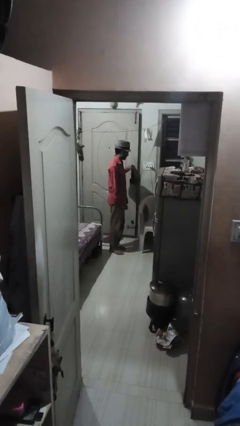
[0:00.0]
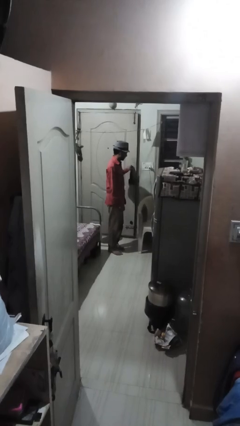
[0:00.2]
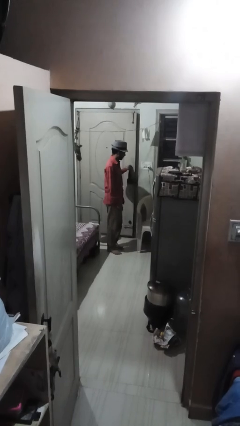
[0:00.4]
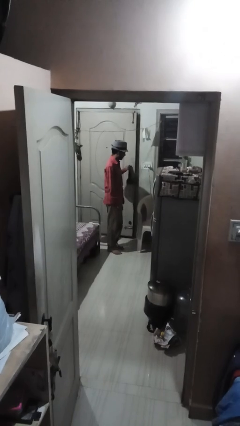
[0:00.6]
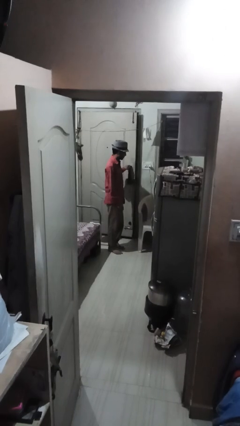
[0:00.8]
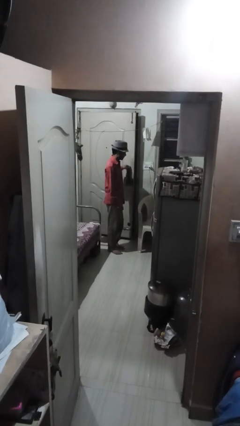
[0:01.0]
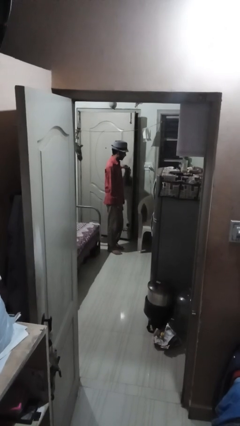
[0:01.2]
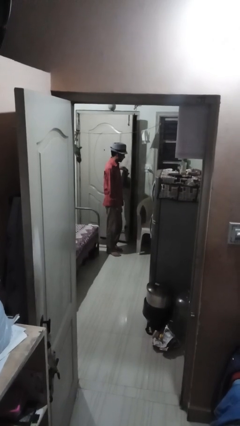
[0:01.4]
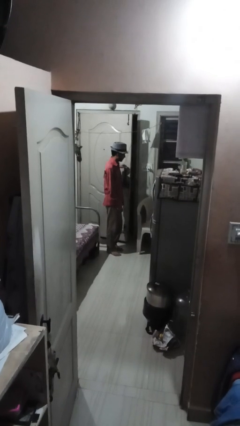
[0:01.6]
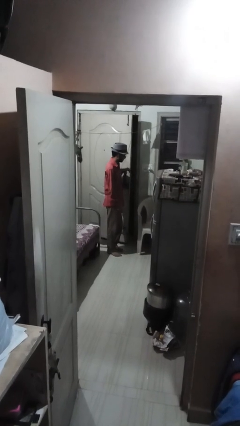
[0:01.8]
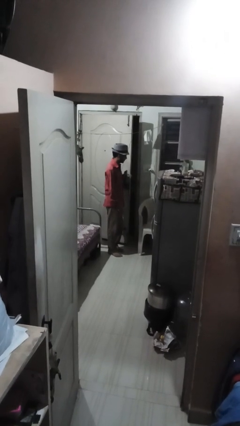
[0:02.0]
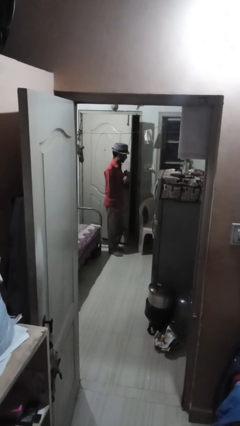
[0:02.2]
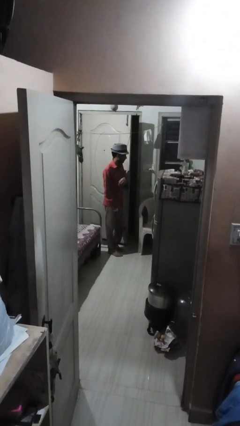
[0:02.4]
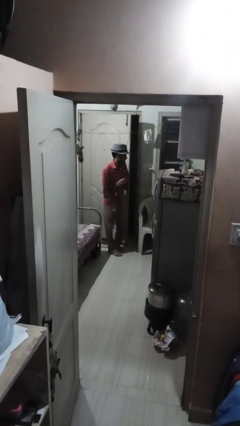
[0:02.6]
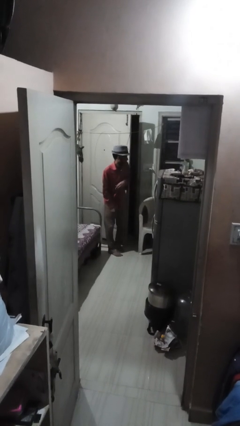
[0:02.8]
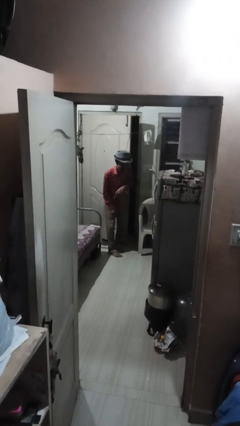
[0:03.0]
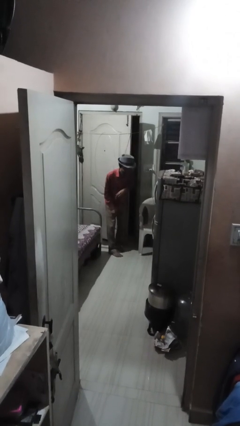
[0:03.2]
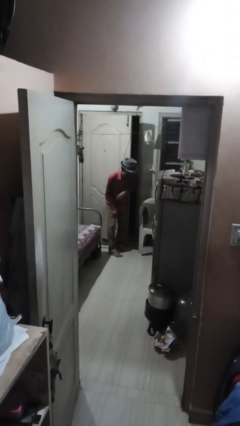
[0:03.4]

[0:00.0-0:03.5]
person opens facility door

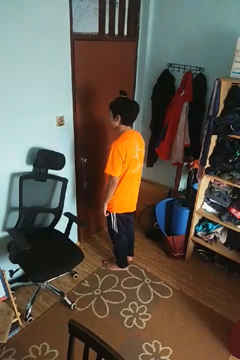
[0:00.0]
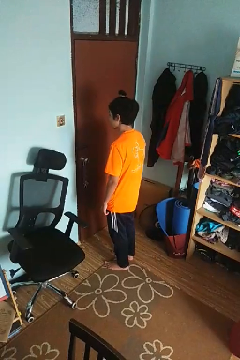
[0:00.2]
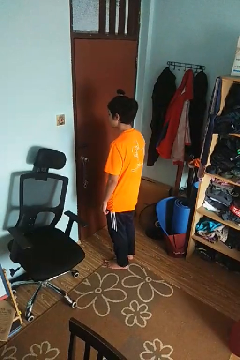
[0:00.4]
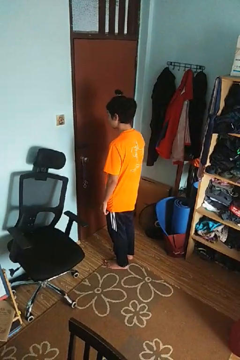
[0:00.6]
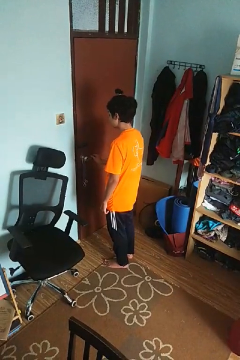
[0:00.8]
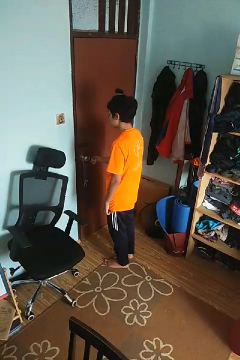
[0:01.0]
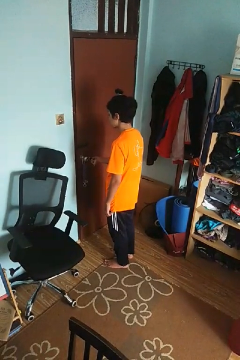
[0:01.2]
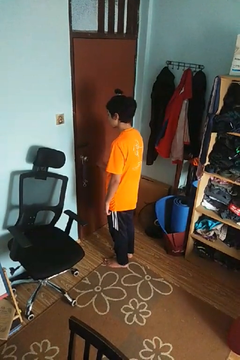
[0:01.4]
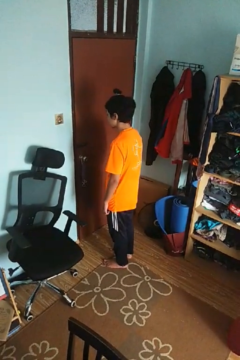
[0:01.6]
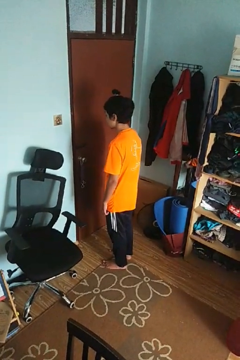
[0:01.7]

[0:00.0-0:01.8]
person unlocks door with keys

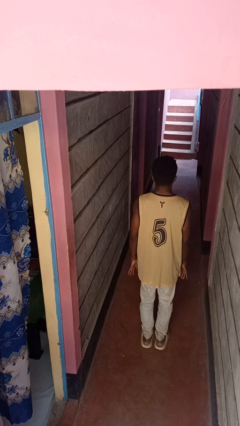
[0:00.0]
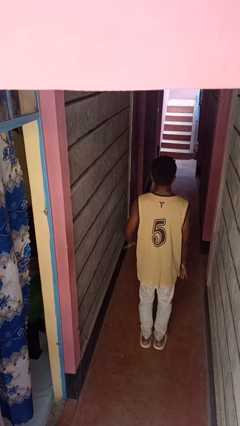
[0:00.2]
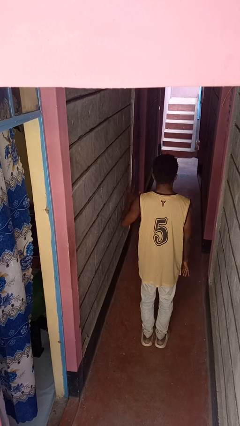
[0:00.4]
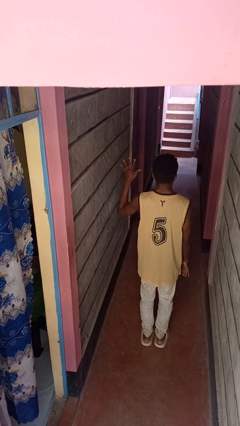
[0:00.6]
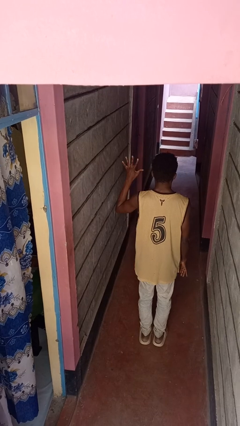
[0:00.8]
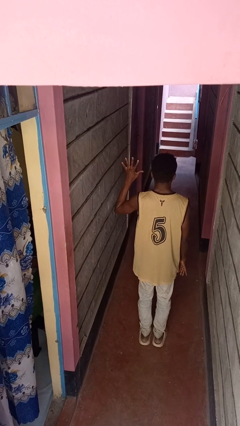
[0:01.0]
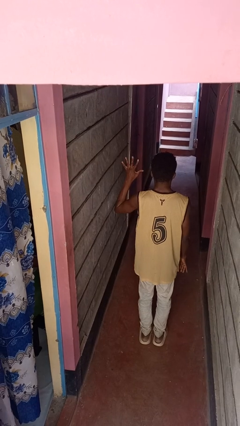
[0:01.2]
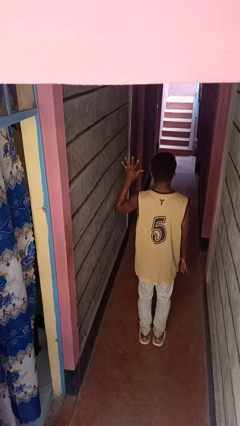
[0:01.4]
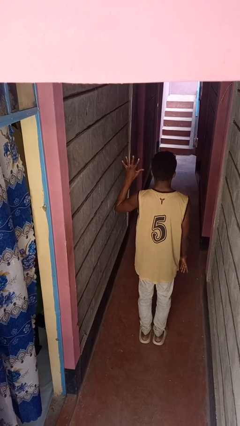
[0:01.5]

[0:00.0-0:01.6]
person gestures number five

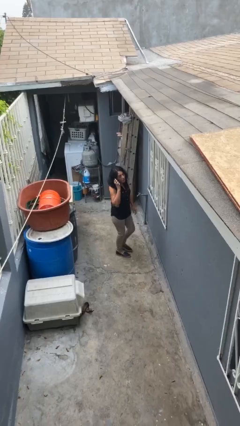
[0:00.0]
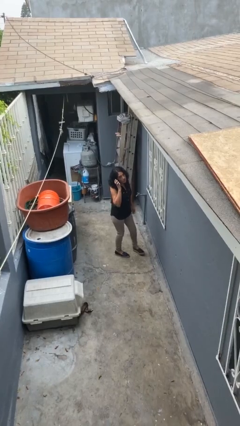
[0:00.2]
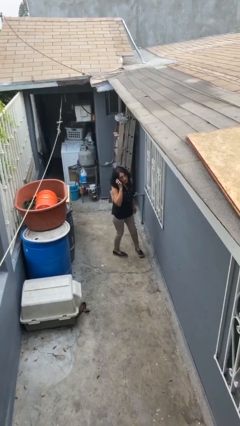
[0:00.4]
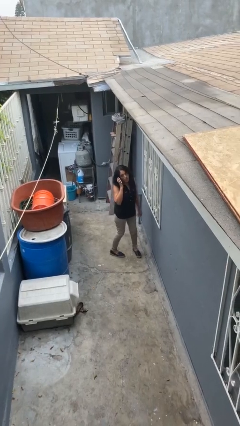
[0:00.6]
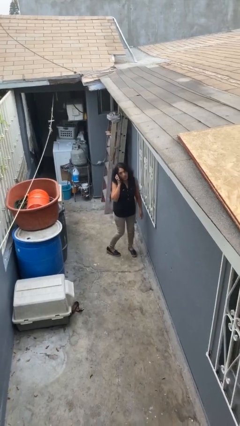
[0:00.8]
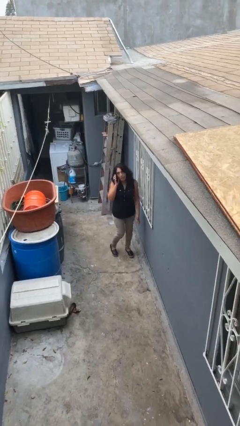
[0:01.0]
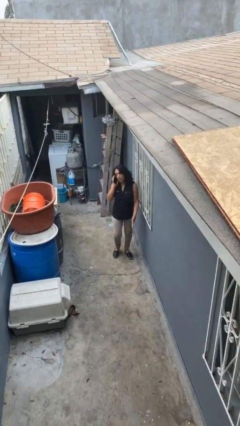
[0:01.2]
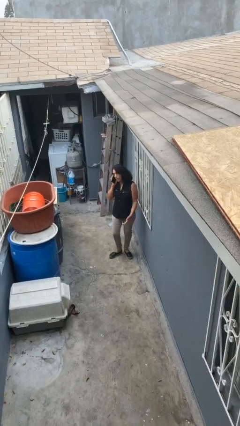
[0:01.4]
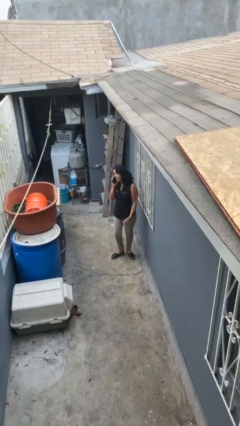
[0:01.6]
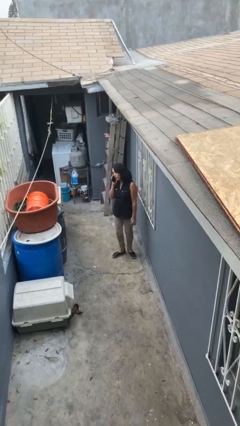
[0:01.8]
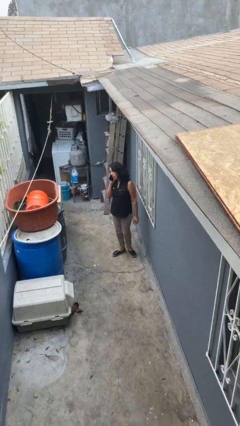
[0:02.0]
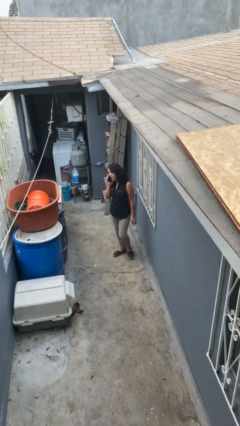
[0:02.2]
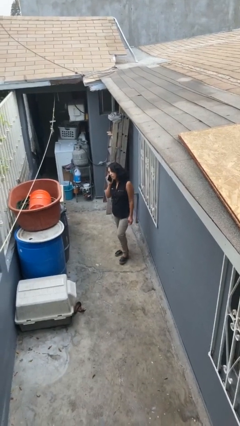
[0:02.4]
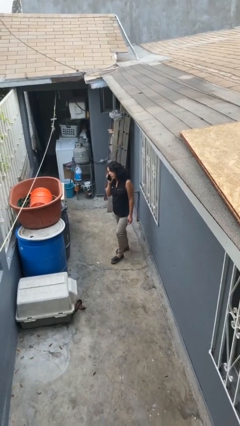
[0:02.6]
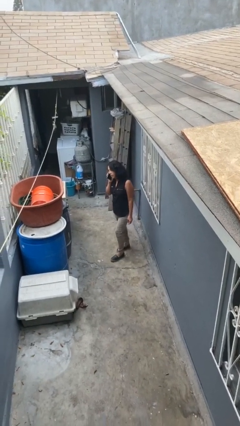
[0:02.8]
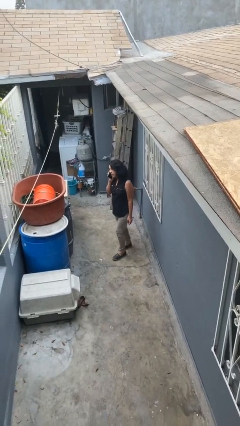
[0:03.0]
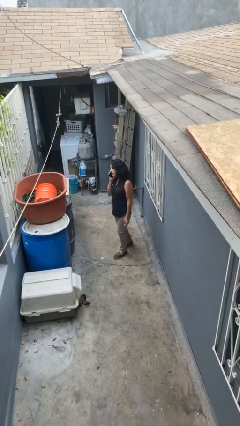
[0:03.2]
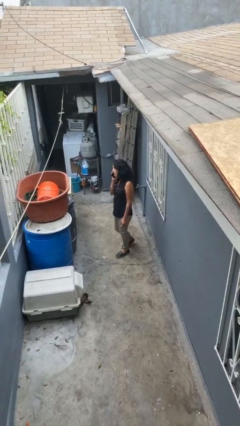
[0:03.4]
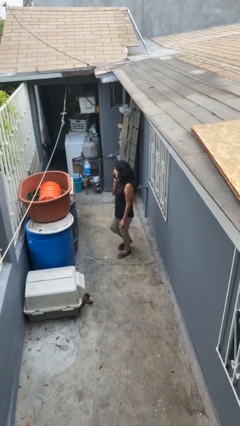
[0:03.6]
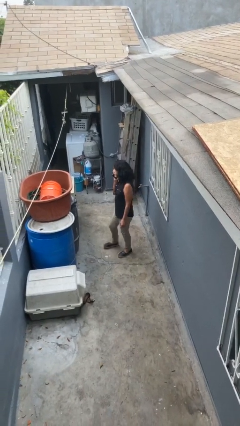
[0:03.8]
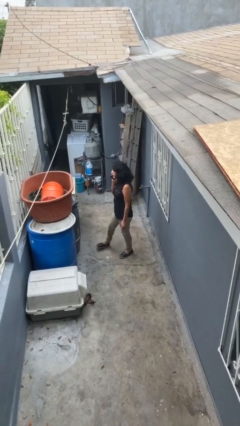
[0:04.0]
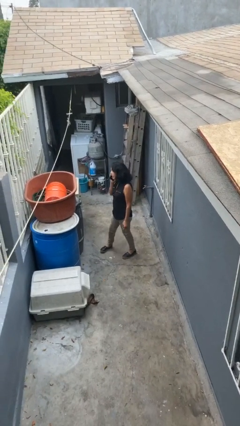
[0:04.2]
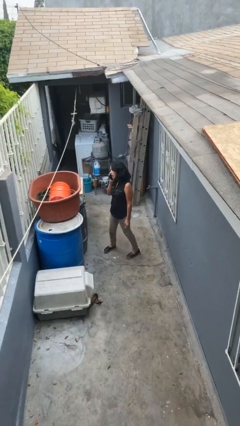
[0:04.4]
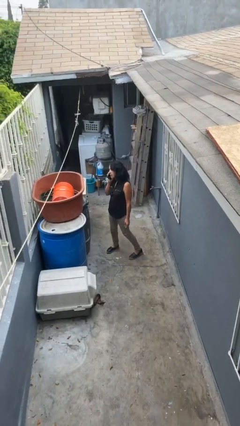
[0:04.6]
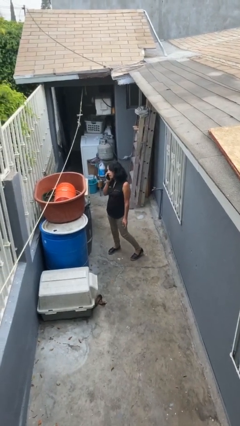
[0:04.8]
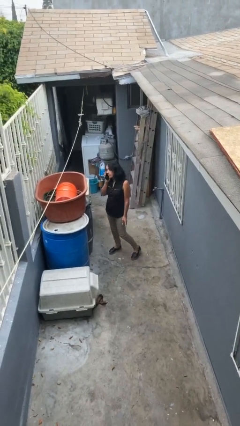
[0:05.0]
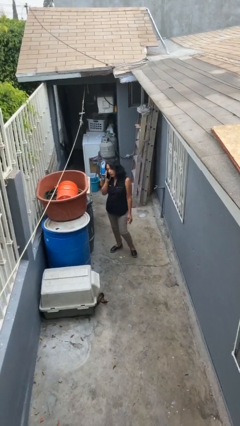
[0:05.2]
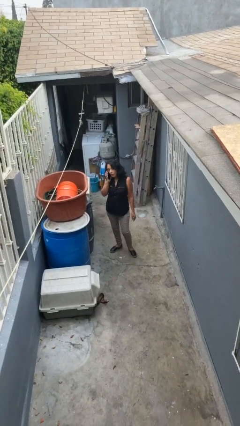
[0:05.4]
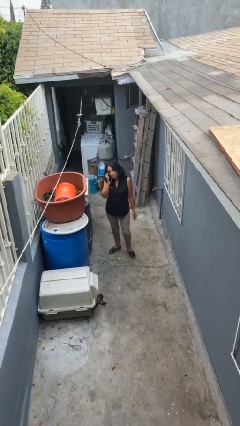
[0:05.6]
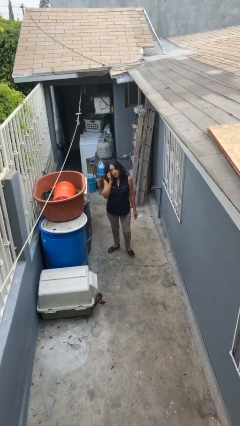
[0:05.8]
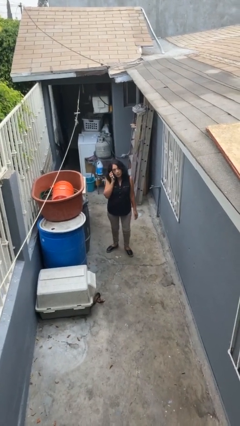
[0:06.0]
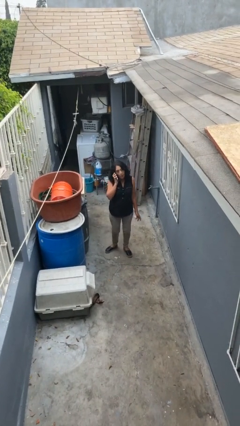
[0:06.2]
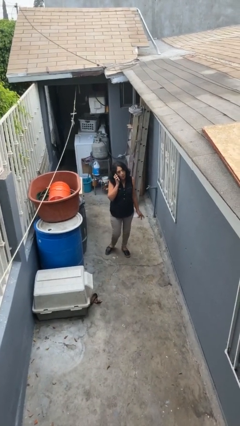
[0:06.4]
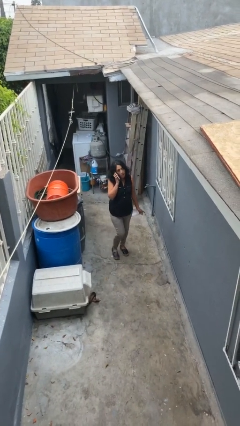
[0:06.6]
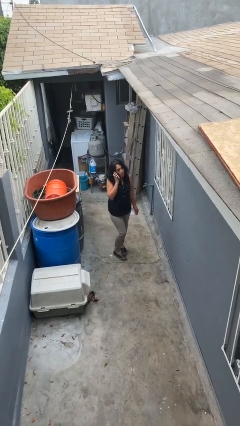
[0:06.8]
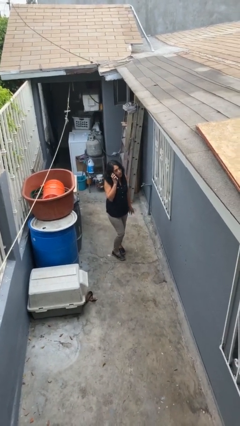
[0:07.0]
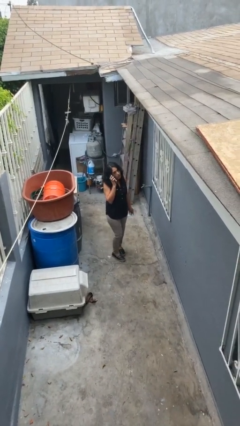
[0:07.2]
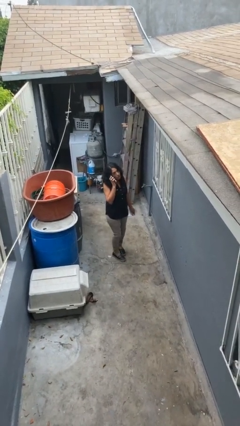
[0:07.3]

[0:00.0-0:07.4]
person talks on phone

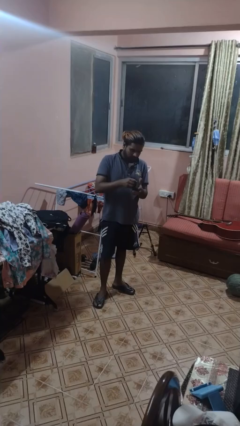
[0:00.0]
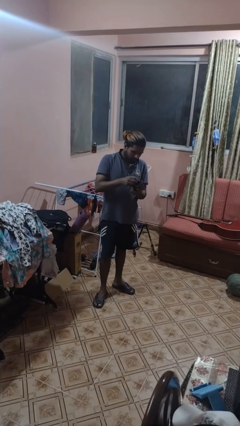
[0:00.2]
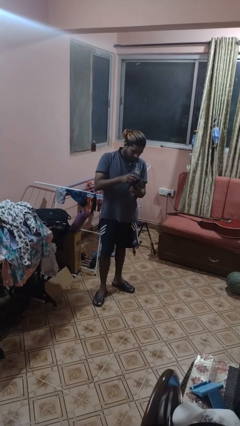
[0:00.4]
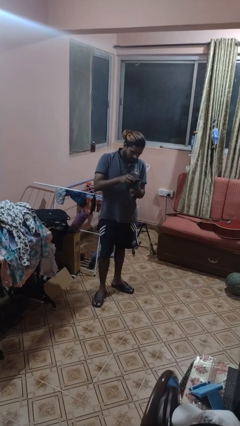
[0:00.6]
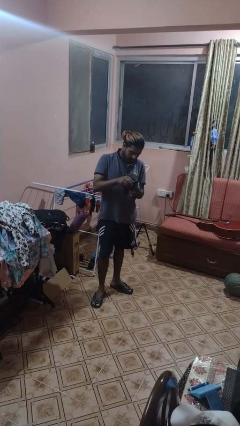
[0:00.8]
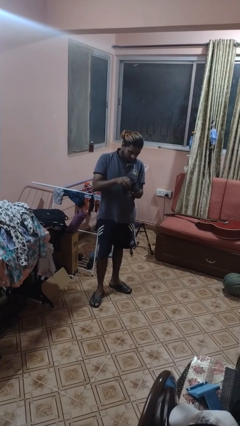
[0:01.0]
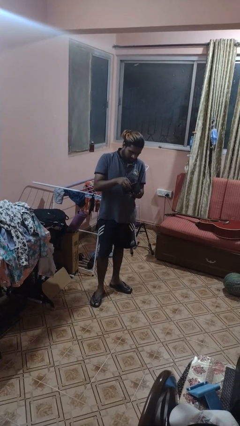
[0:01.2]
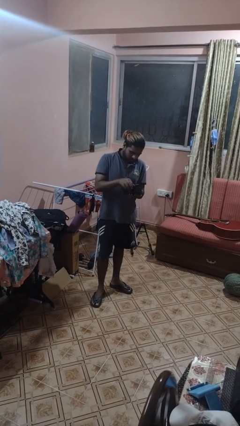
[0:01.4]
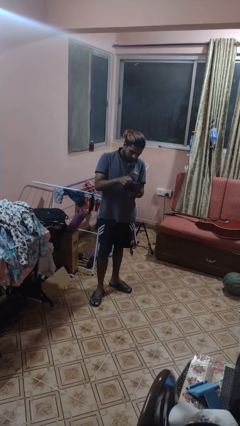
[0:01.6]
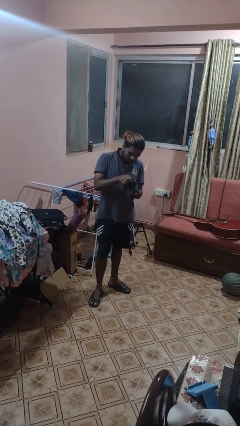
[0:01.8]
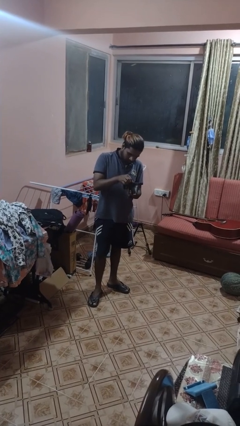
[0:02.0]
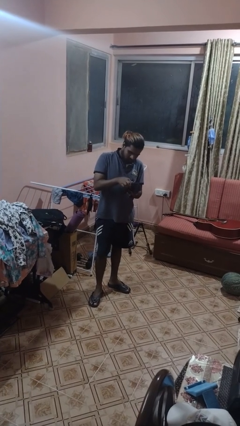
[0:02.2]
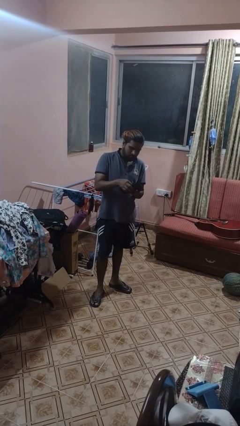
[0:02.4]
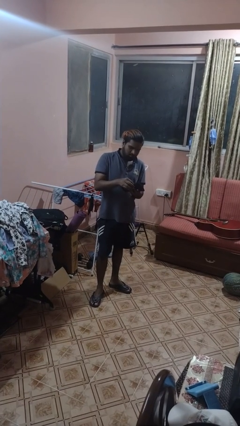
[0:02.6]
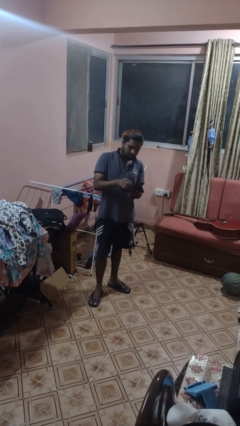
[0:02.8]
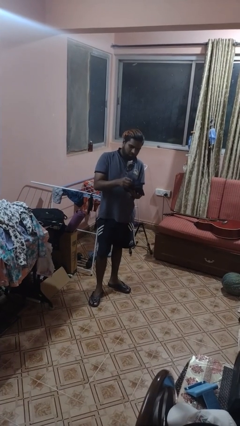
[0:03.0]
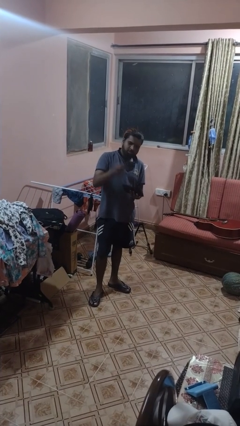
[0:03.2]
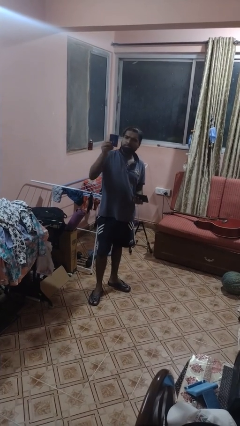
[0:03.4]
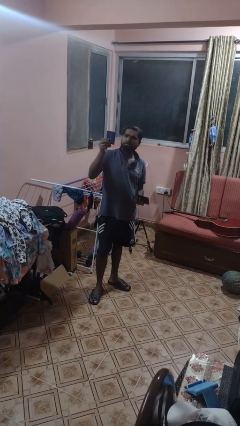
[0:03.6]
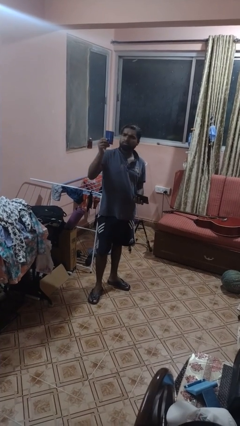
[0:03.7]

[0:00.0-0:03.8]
person searches in purse
